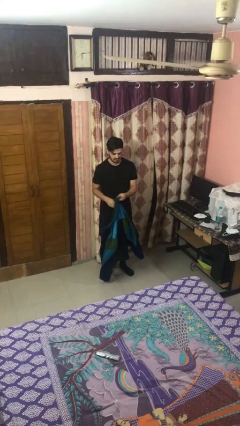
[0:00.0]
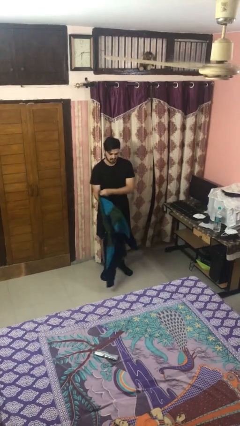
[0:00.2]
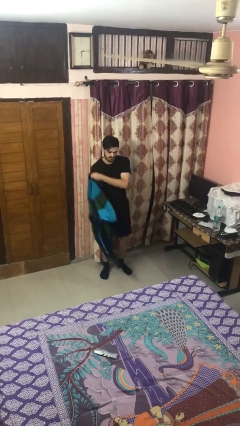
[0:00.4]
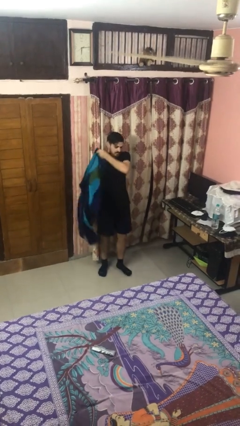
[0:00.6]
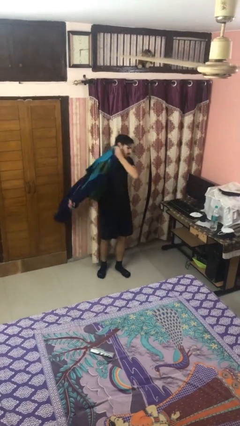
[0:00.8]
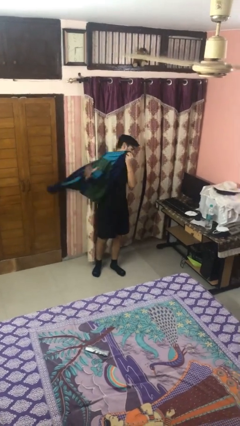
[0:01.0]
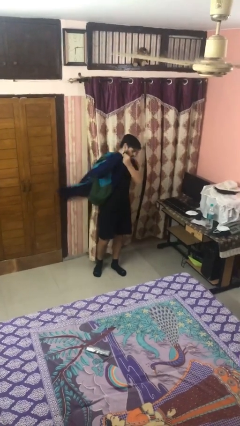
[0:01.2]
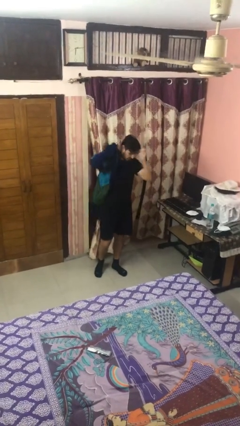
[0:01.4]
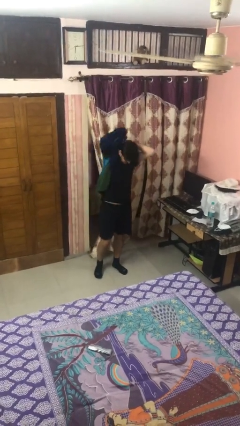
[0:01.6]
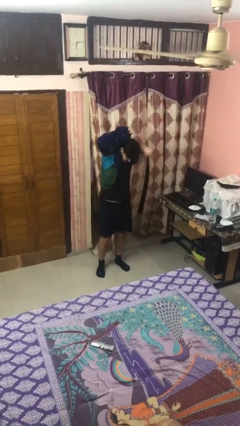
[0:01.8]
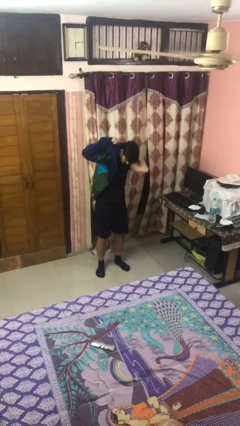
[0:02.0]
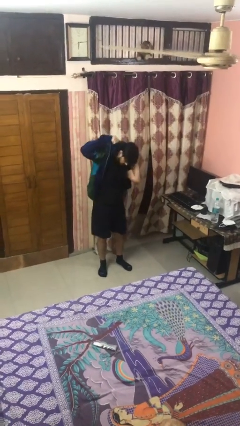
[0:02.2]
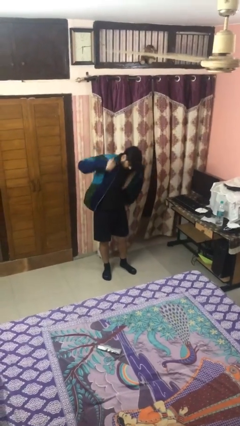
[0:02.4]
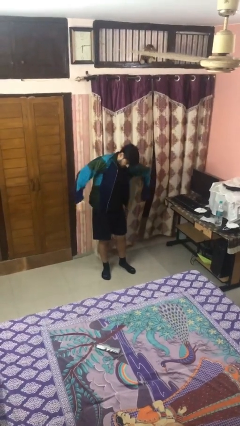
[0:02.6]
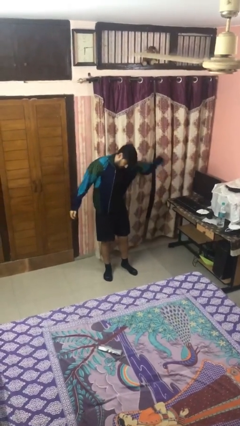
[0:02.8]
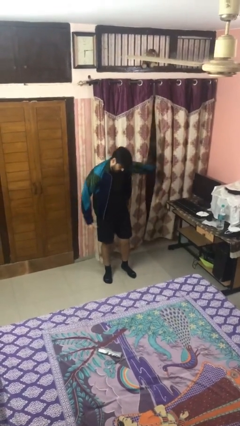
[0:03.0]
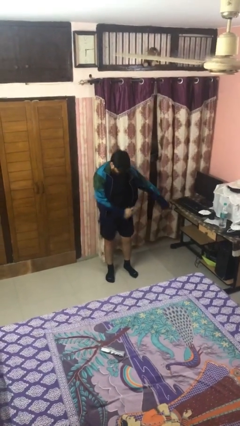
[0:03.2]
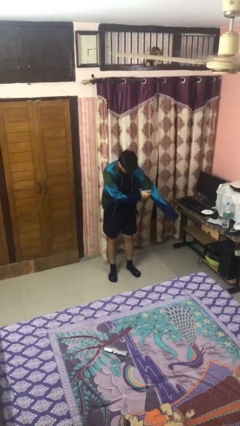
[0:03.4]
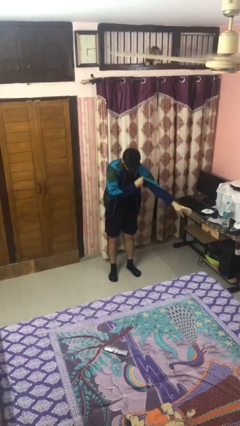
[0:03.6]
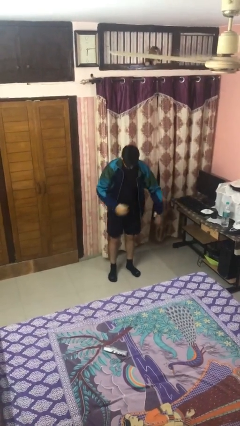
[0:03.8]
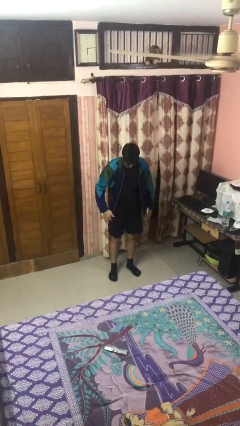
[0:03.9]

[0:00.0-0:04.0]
person puts on jacket

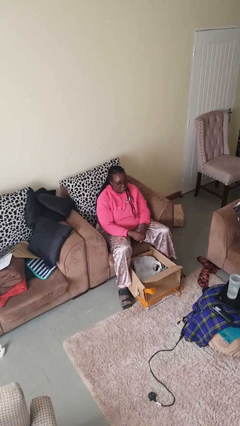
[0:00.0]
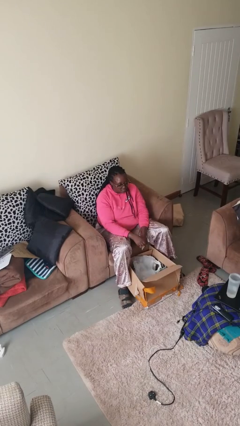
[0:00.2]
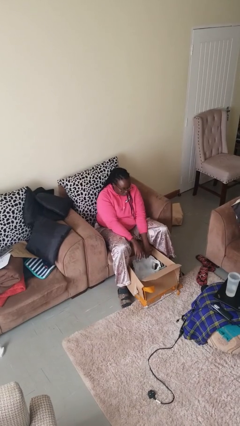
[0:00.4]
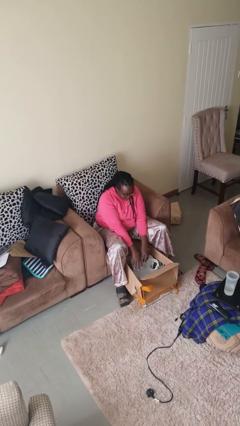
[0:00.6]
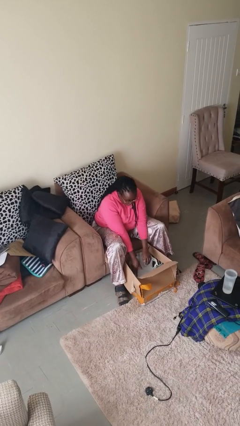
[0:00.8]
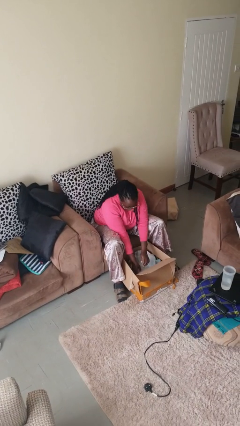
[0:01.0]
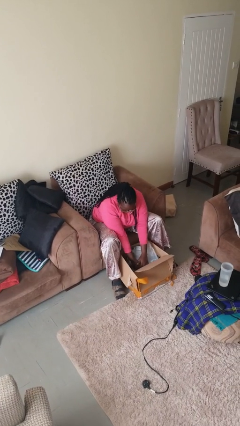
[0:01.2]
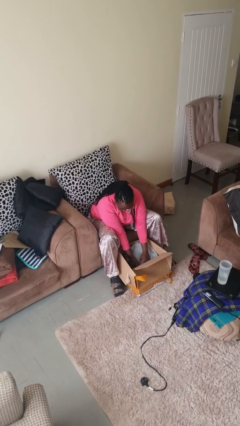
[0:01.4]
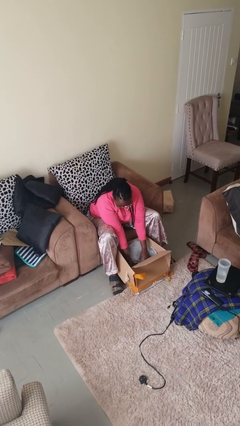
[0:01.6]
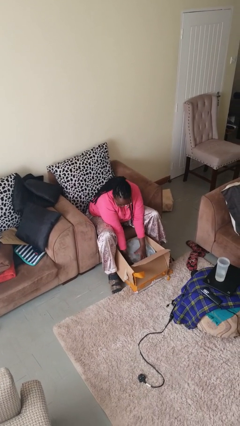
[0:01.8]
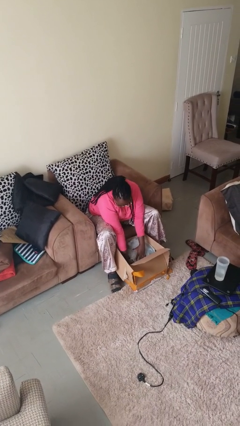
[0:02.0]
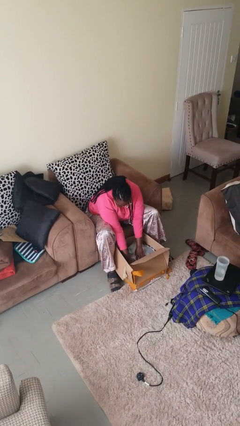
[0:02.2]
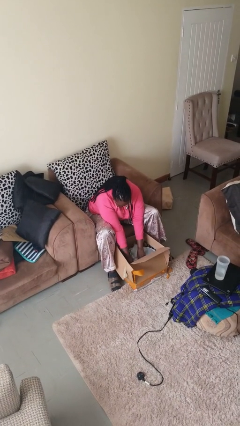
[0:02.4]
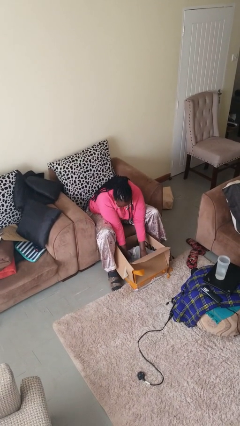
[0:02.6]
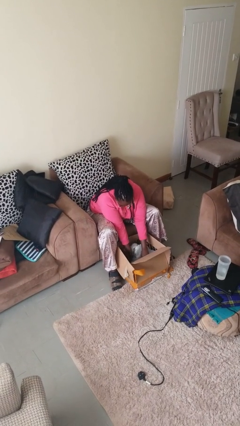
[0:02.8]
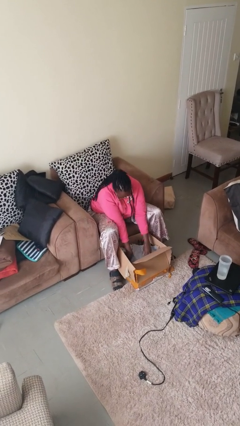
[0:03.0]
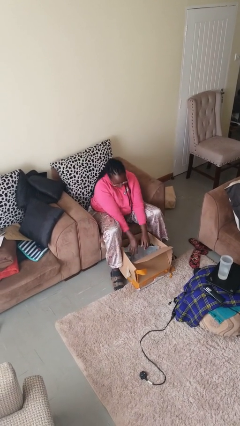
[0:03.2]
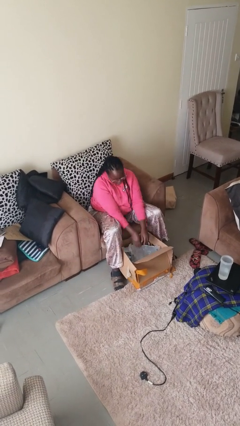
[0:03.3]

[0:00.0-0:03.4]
person searches in box

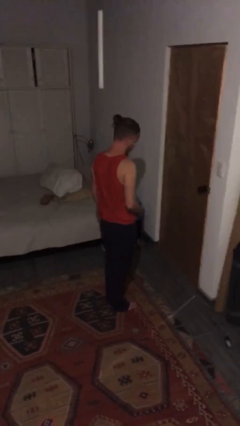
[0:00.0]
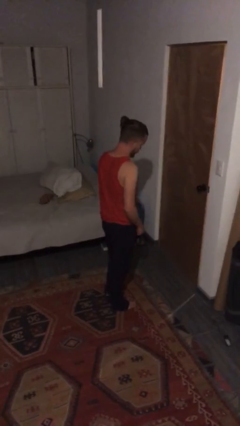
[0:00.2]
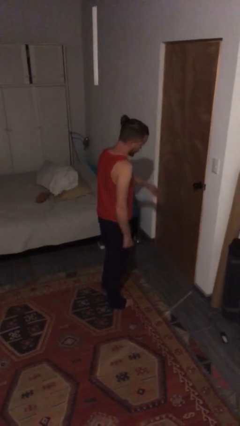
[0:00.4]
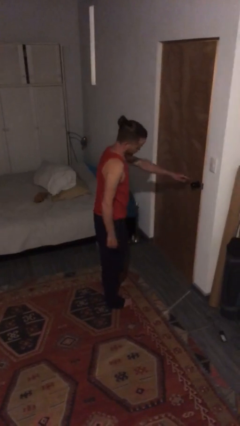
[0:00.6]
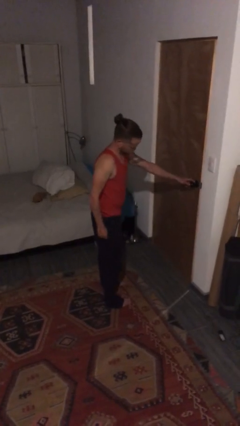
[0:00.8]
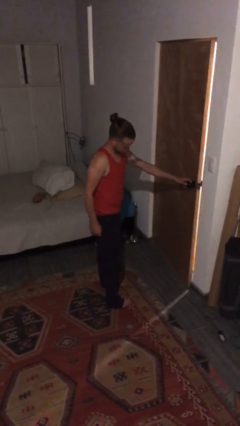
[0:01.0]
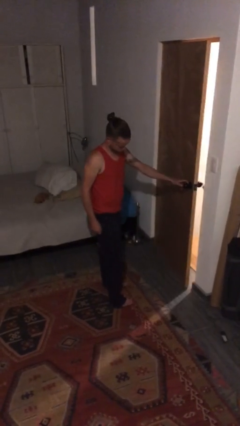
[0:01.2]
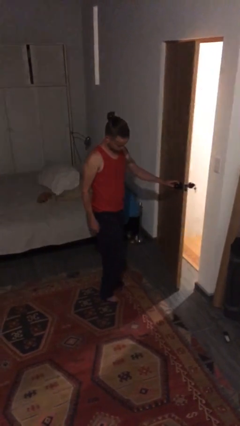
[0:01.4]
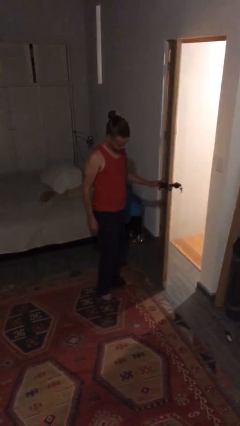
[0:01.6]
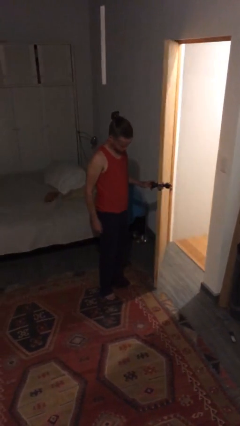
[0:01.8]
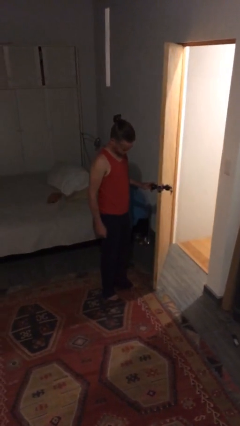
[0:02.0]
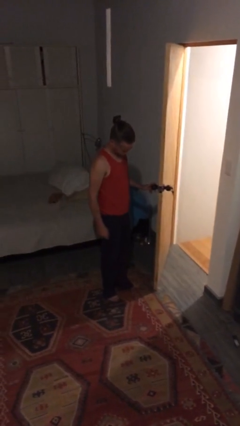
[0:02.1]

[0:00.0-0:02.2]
person opens facility door

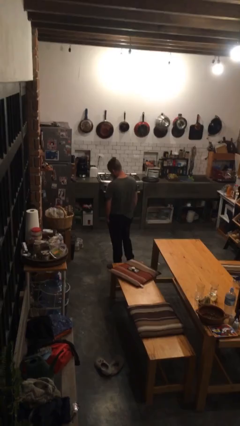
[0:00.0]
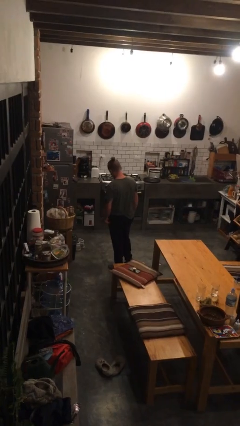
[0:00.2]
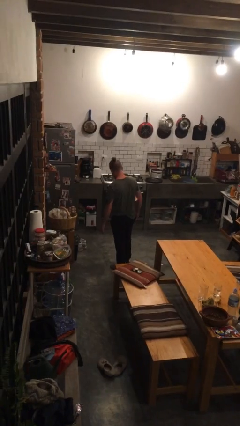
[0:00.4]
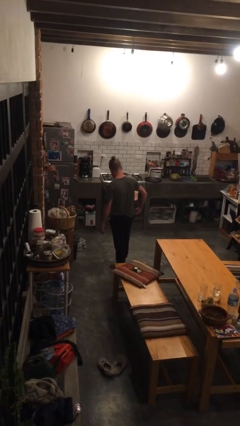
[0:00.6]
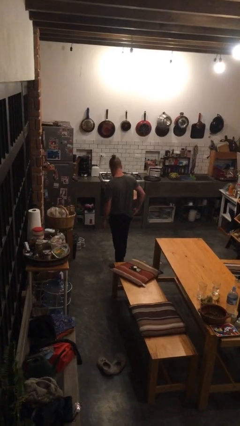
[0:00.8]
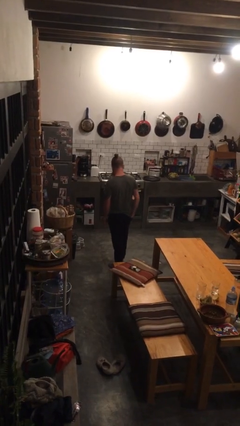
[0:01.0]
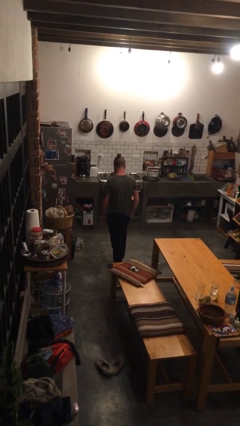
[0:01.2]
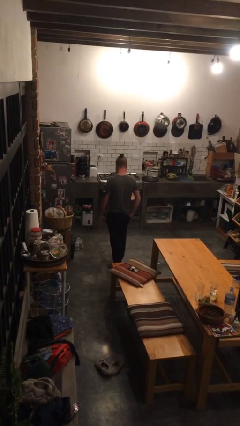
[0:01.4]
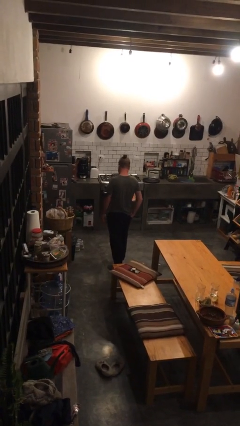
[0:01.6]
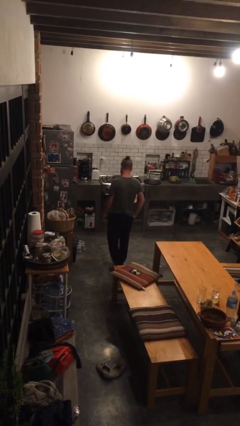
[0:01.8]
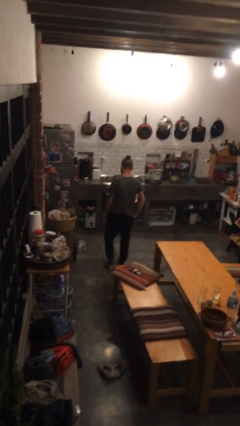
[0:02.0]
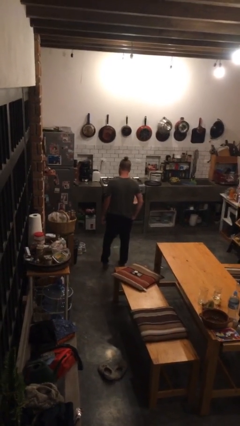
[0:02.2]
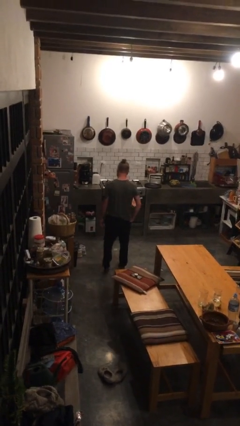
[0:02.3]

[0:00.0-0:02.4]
person puts hands in back pockets

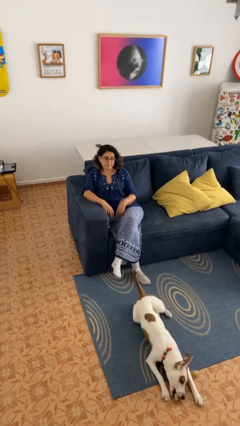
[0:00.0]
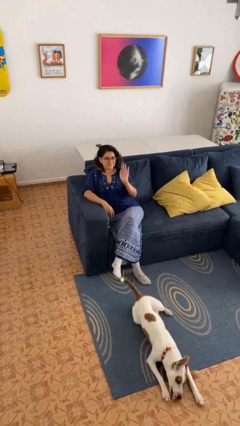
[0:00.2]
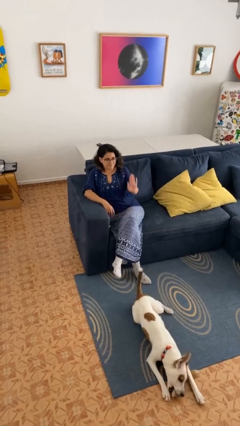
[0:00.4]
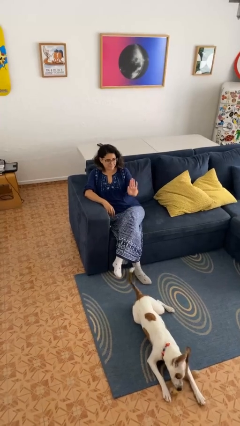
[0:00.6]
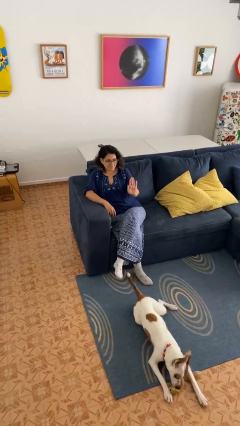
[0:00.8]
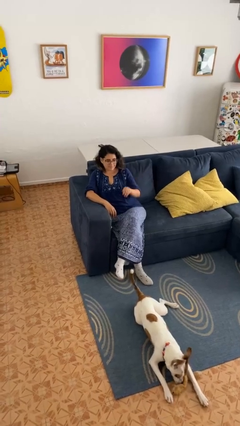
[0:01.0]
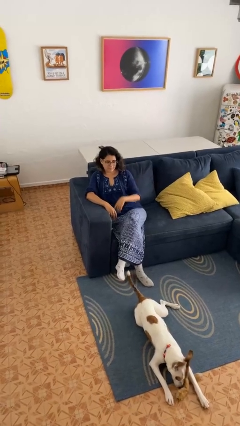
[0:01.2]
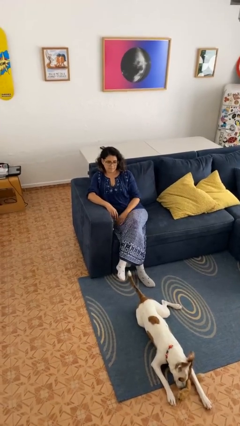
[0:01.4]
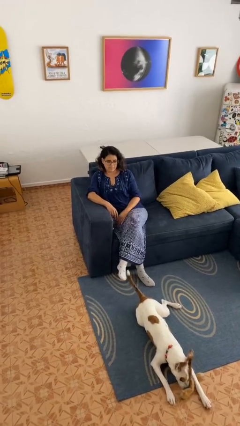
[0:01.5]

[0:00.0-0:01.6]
person gestures stop

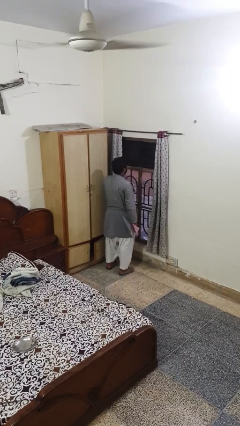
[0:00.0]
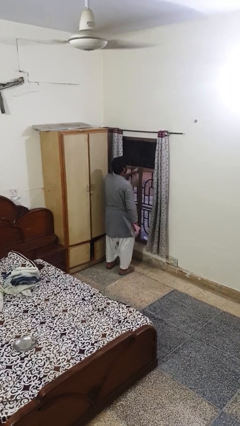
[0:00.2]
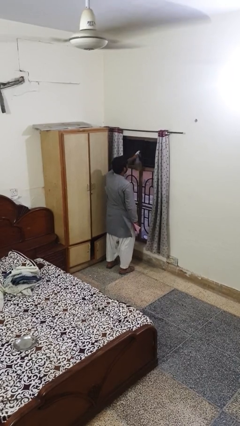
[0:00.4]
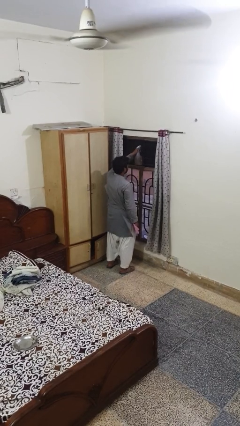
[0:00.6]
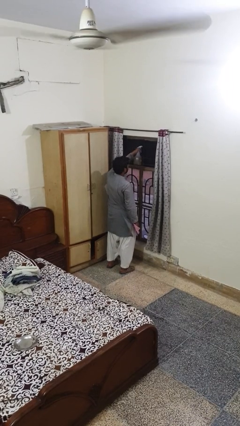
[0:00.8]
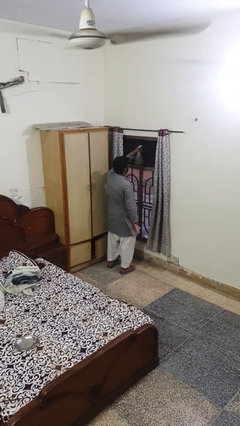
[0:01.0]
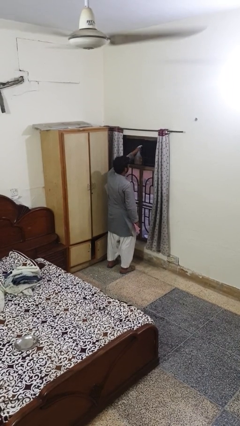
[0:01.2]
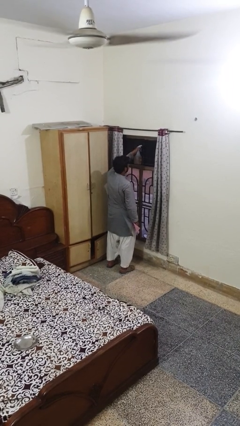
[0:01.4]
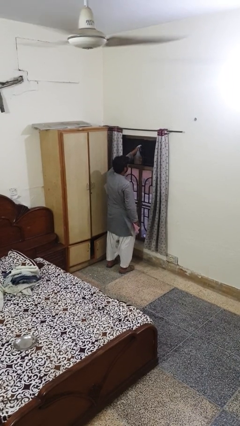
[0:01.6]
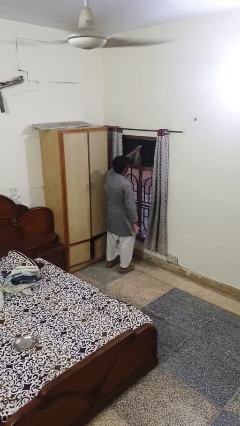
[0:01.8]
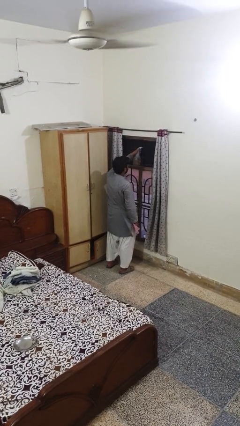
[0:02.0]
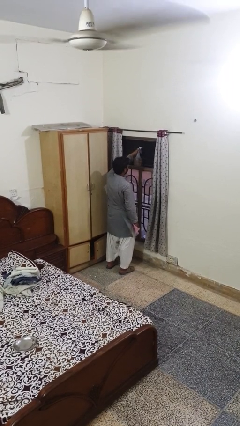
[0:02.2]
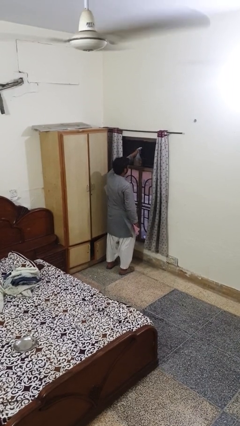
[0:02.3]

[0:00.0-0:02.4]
person sprays from bottle

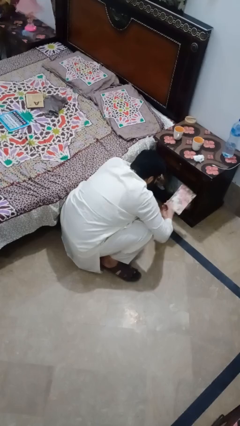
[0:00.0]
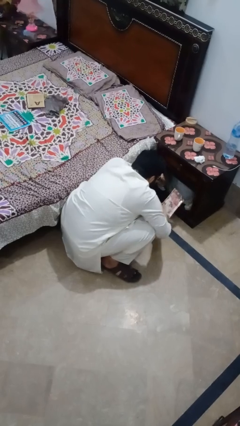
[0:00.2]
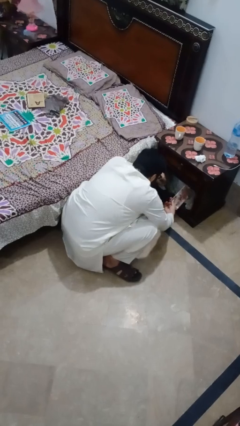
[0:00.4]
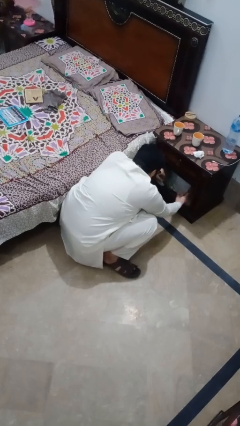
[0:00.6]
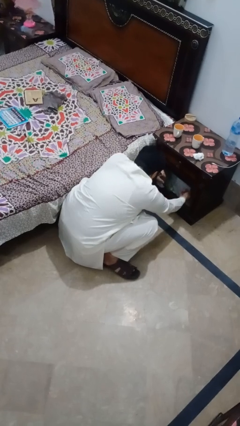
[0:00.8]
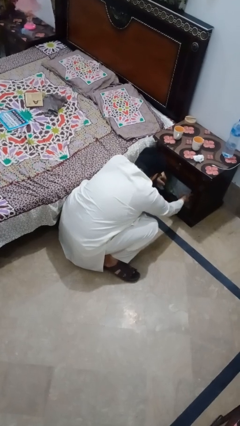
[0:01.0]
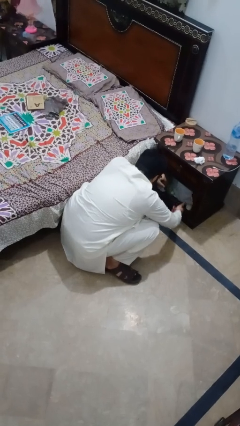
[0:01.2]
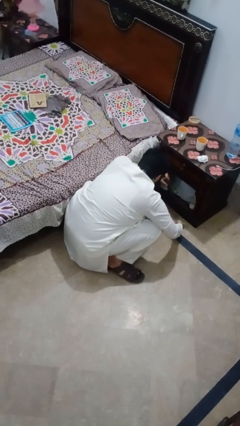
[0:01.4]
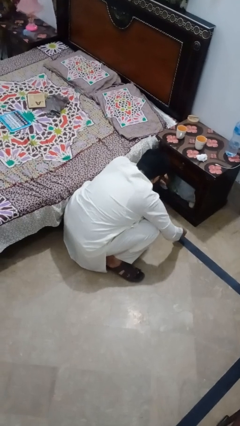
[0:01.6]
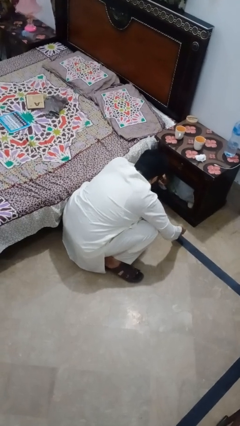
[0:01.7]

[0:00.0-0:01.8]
person puts down object into cabinet
